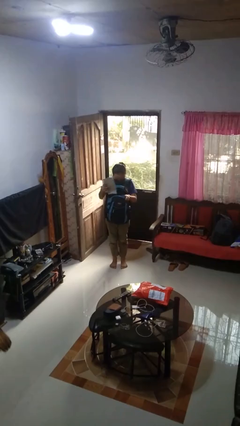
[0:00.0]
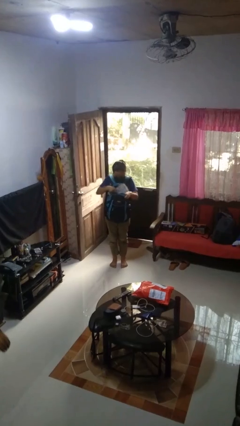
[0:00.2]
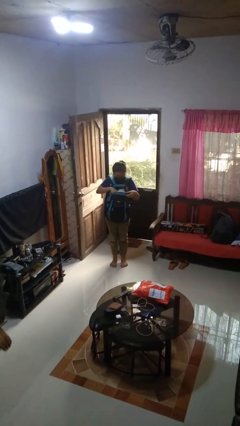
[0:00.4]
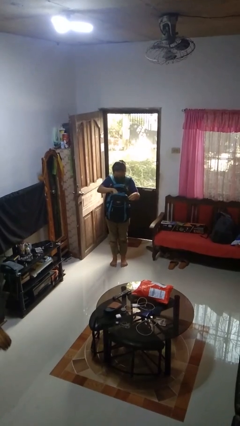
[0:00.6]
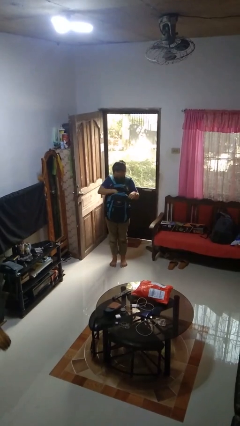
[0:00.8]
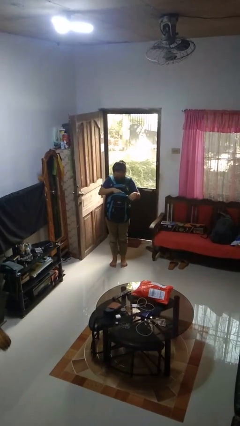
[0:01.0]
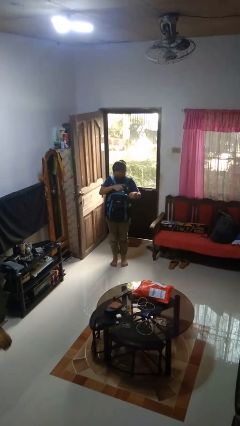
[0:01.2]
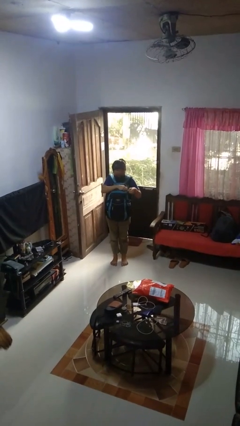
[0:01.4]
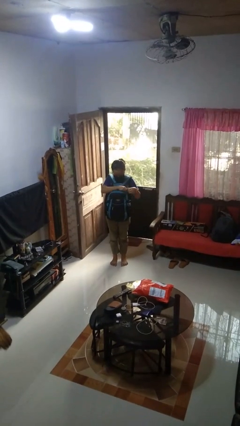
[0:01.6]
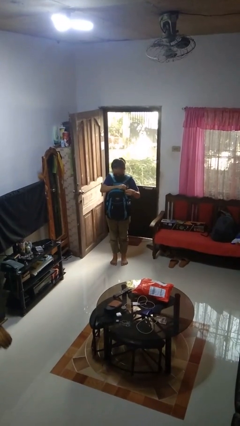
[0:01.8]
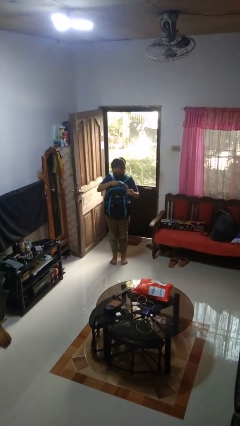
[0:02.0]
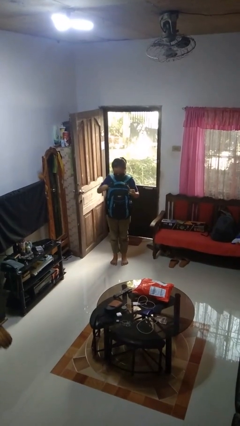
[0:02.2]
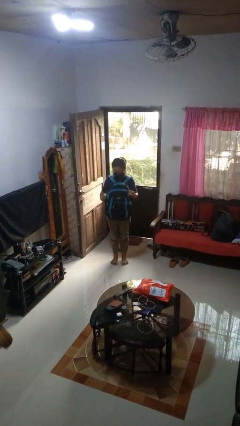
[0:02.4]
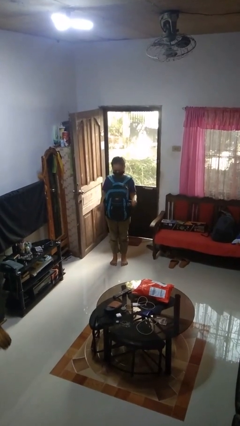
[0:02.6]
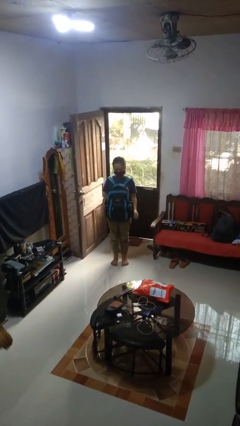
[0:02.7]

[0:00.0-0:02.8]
person puts object into backpack

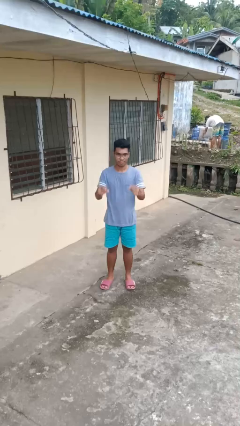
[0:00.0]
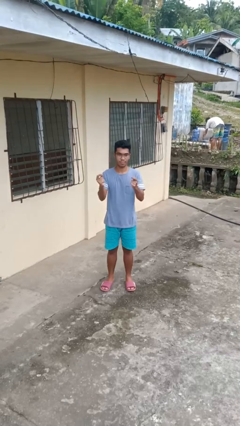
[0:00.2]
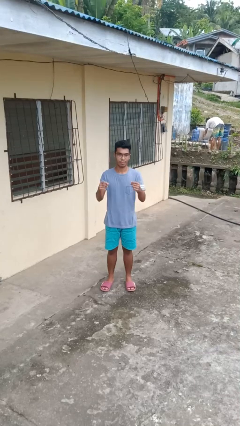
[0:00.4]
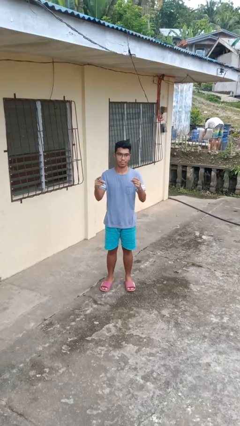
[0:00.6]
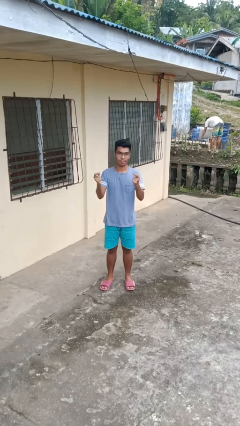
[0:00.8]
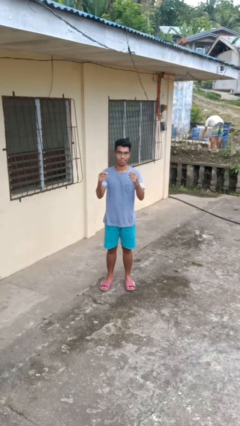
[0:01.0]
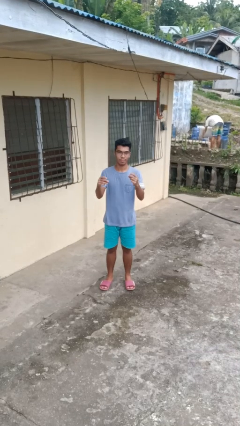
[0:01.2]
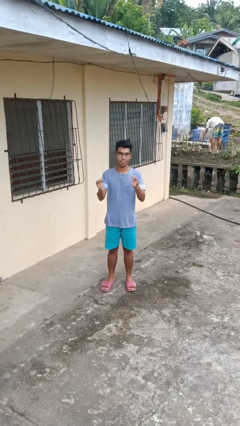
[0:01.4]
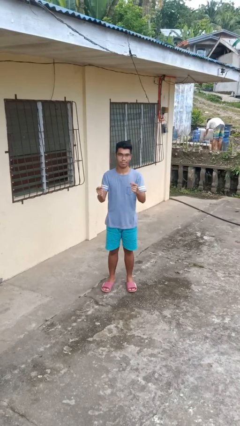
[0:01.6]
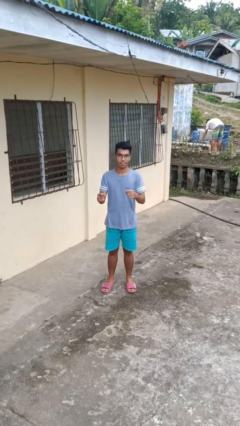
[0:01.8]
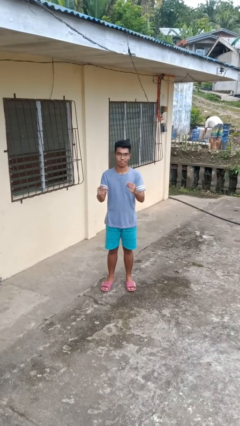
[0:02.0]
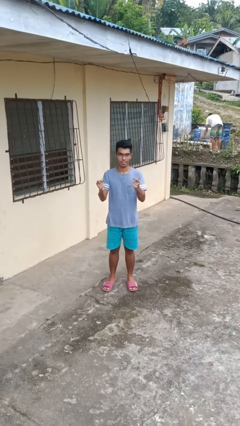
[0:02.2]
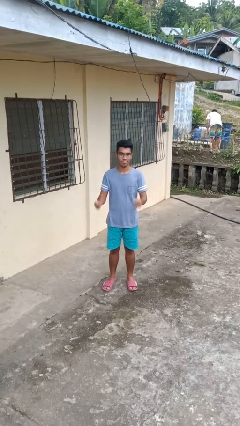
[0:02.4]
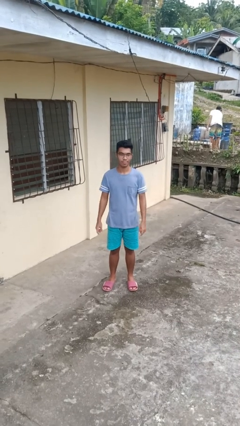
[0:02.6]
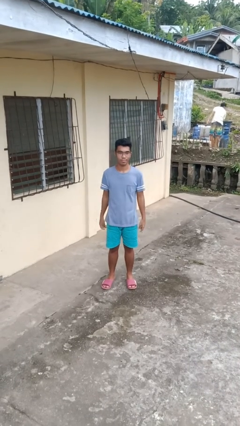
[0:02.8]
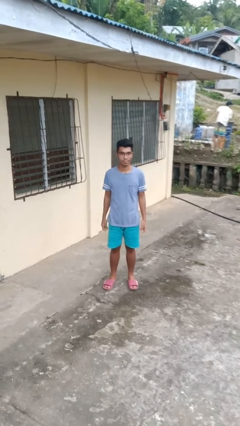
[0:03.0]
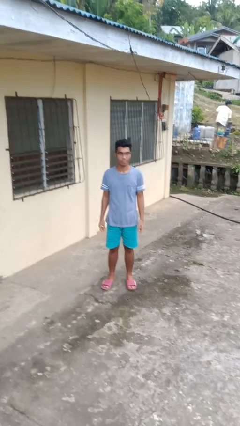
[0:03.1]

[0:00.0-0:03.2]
person snaps fingers

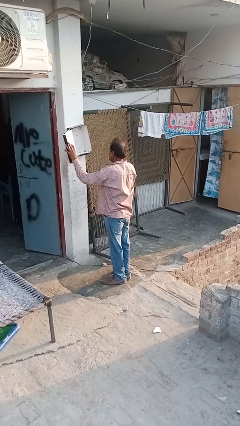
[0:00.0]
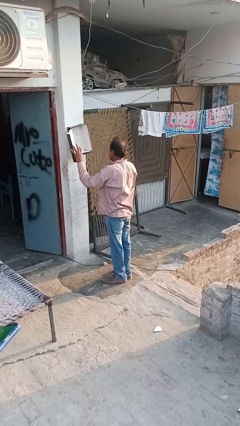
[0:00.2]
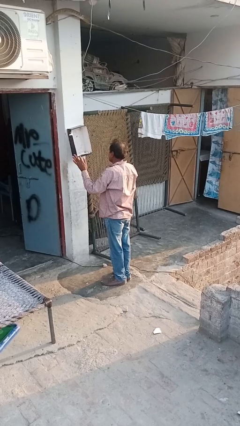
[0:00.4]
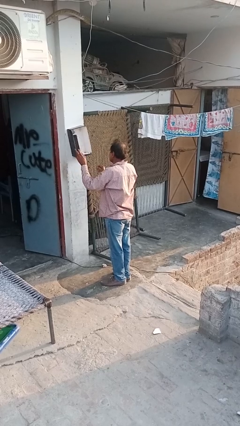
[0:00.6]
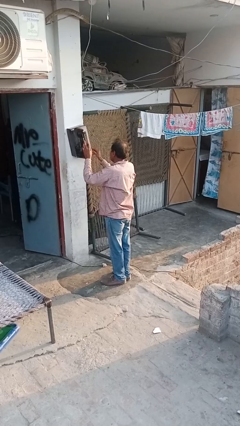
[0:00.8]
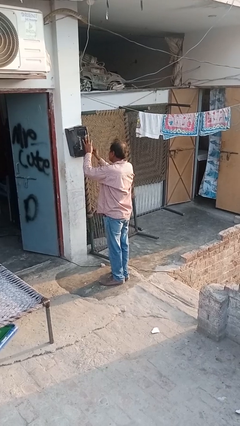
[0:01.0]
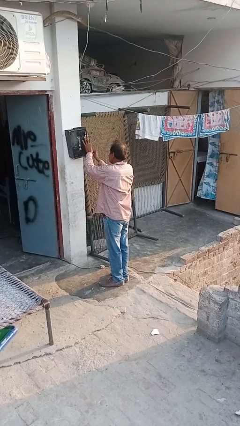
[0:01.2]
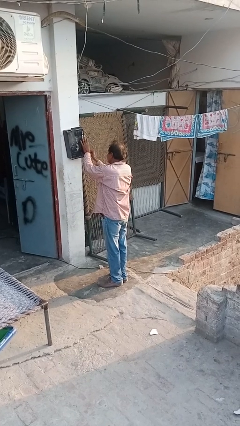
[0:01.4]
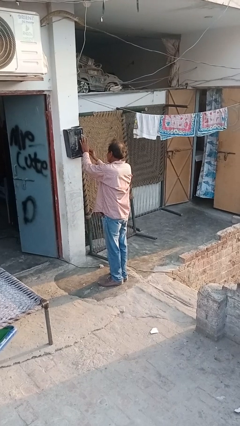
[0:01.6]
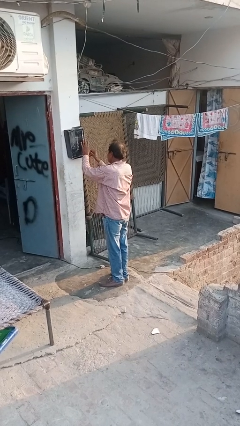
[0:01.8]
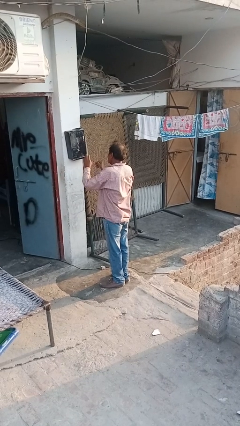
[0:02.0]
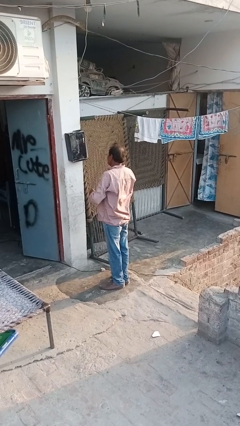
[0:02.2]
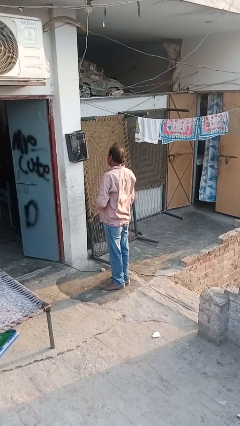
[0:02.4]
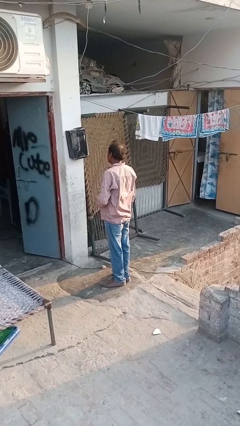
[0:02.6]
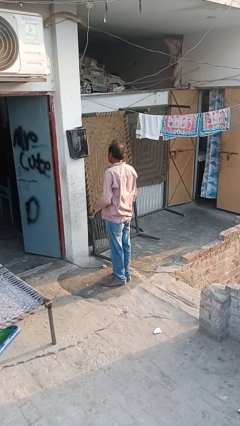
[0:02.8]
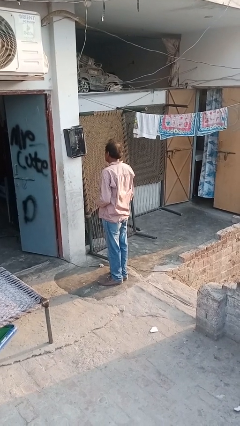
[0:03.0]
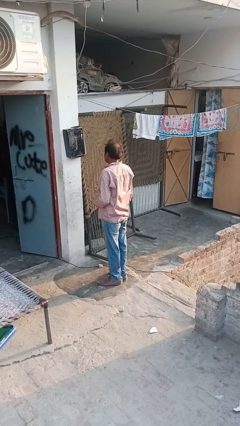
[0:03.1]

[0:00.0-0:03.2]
person closes mailbox

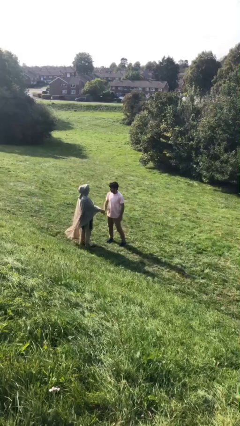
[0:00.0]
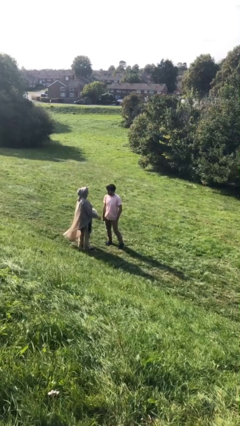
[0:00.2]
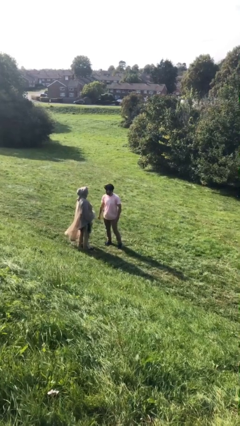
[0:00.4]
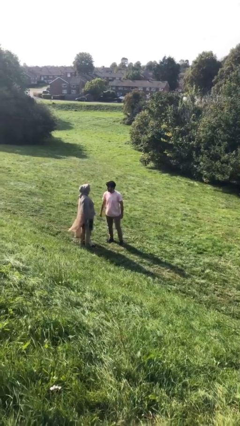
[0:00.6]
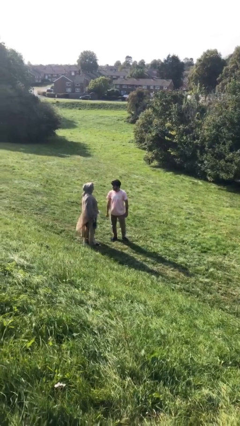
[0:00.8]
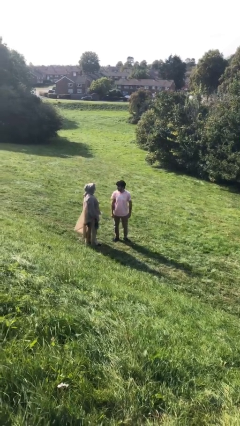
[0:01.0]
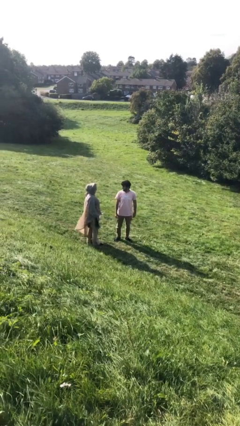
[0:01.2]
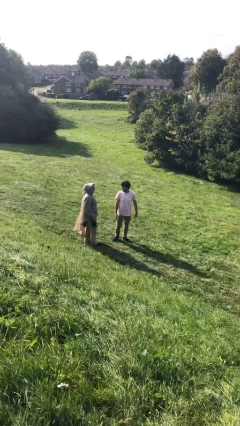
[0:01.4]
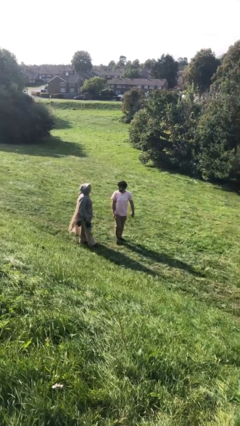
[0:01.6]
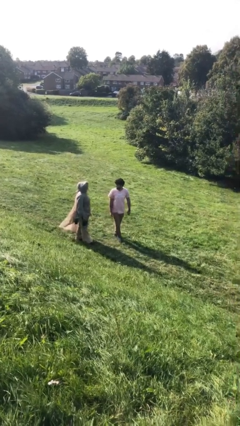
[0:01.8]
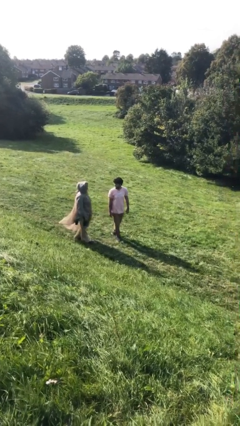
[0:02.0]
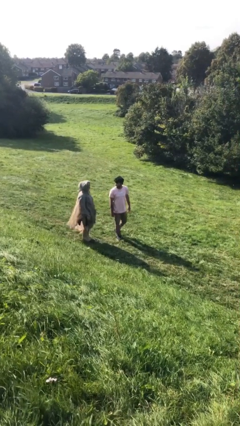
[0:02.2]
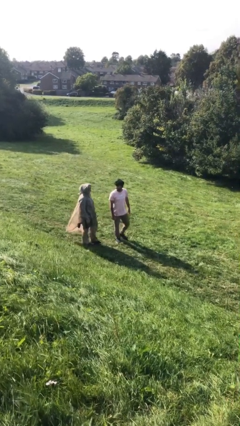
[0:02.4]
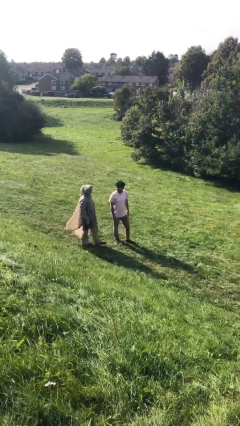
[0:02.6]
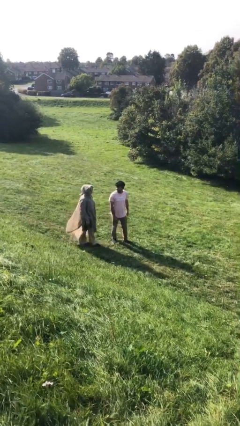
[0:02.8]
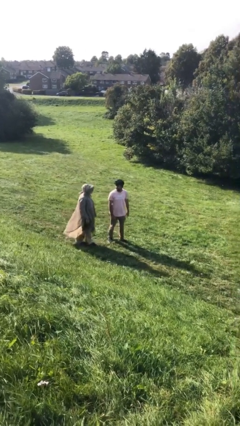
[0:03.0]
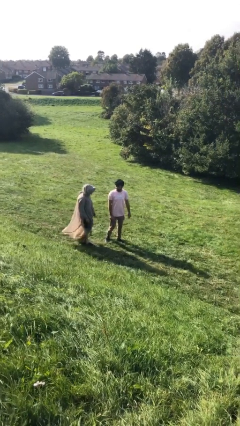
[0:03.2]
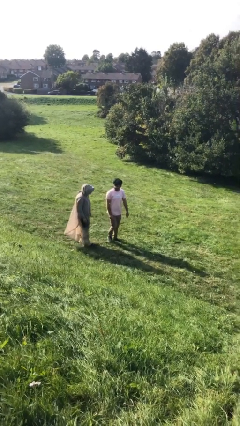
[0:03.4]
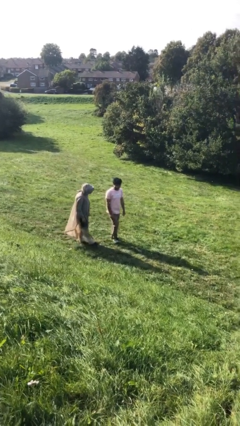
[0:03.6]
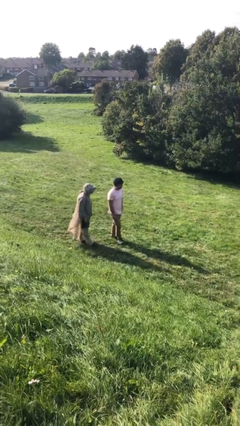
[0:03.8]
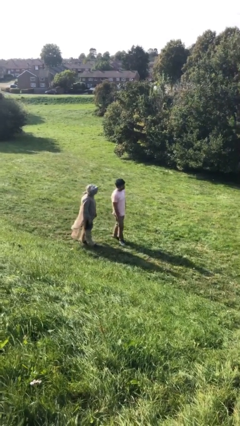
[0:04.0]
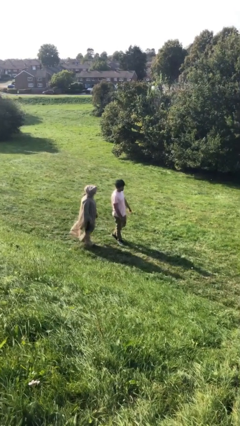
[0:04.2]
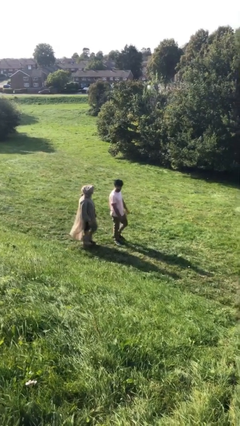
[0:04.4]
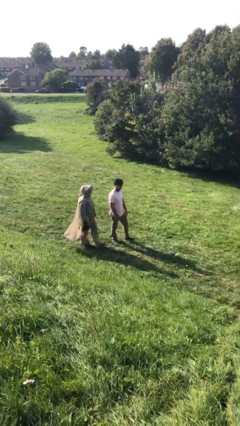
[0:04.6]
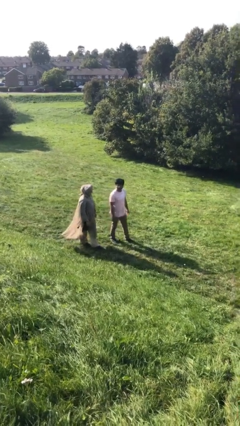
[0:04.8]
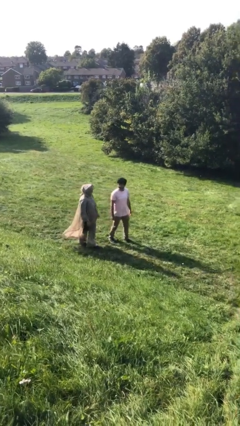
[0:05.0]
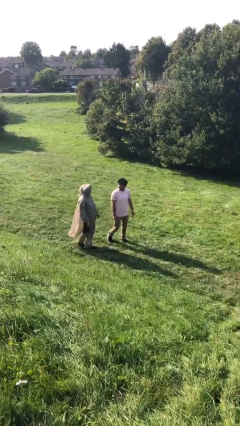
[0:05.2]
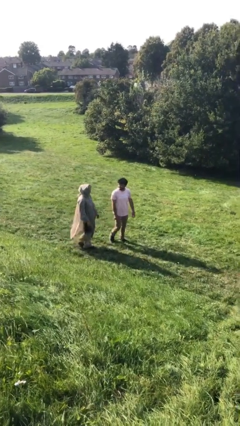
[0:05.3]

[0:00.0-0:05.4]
person talks to person

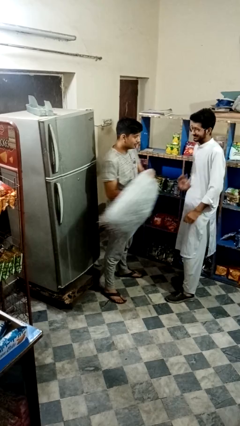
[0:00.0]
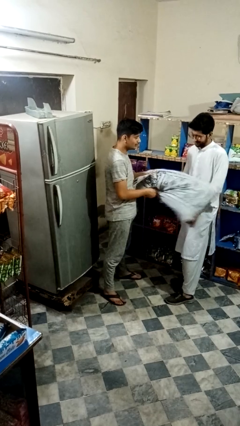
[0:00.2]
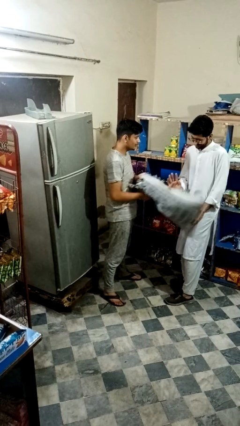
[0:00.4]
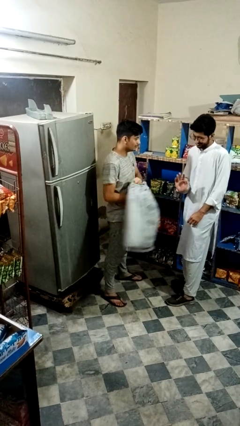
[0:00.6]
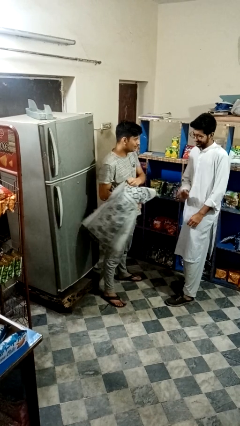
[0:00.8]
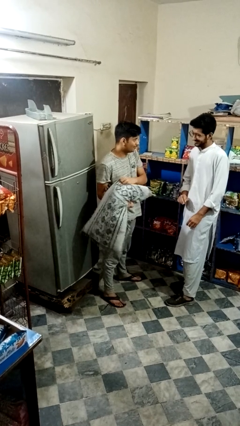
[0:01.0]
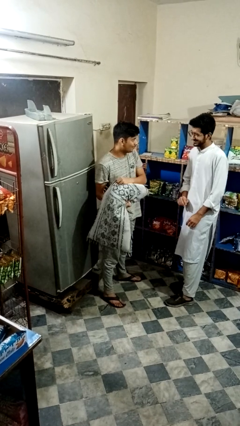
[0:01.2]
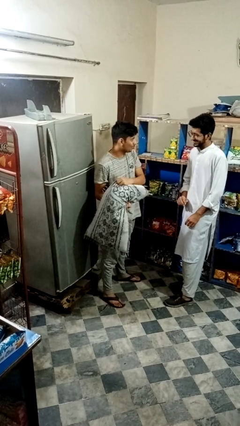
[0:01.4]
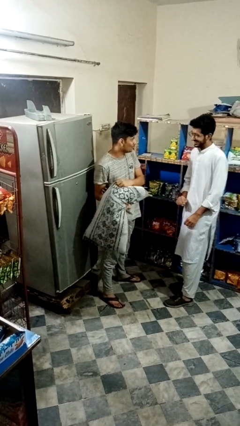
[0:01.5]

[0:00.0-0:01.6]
person hits person with pillow

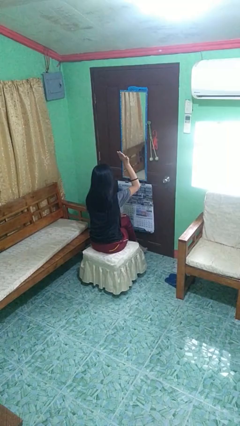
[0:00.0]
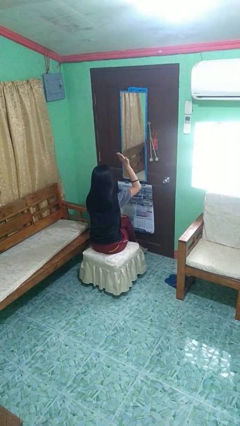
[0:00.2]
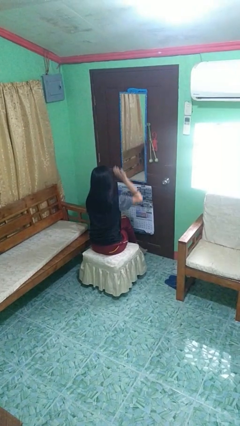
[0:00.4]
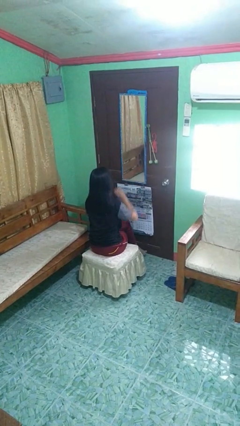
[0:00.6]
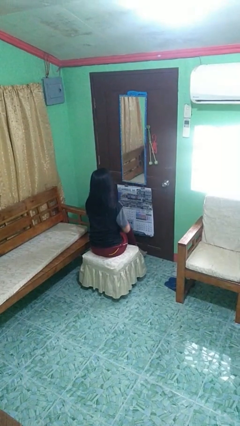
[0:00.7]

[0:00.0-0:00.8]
person gestures lower hand
